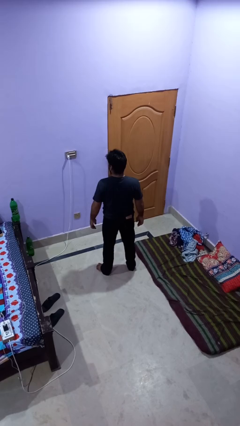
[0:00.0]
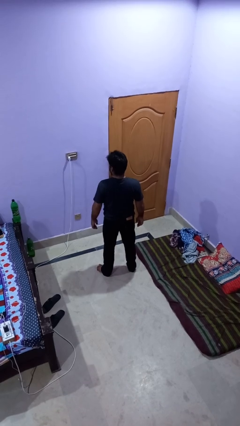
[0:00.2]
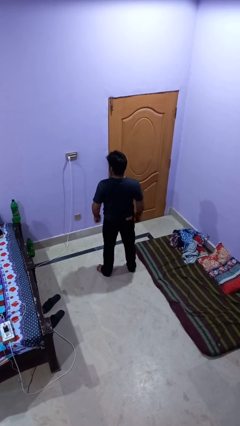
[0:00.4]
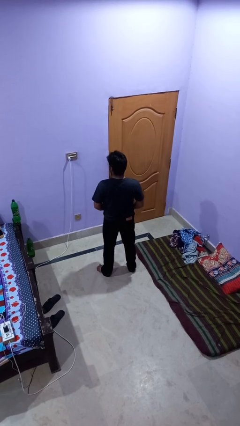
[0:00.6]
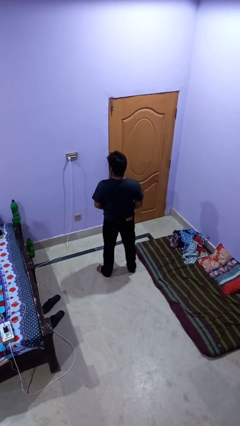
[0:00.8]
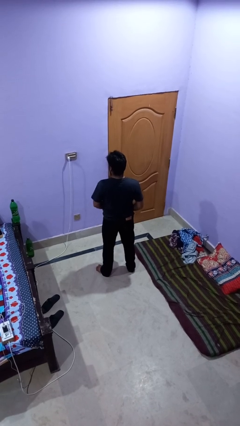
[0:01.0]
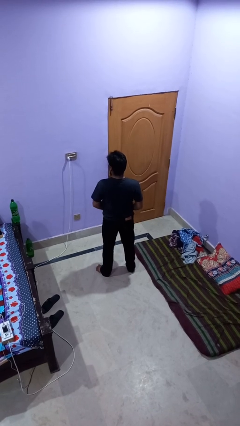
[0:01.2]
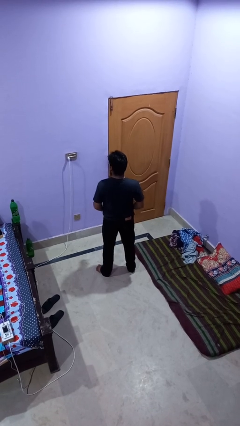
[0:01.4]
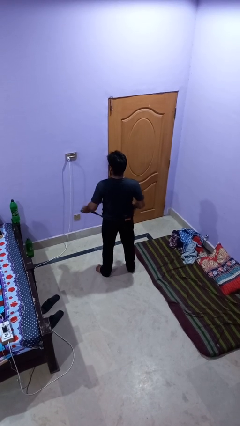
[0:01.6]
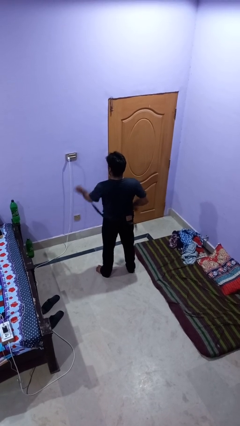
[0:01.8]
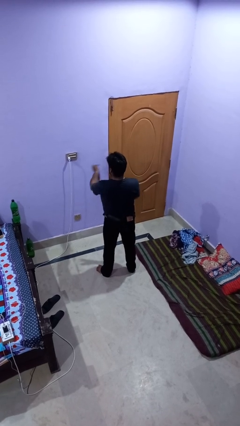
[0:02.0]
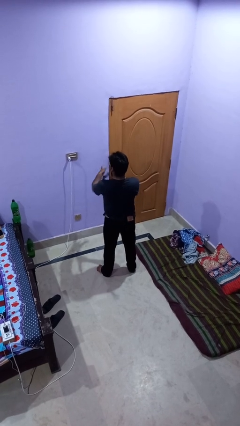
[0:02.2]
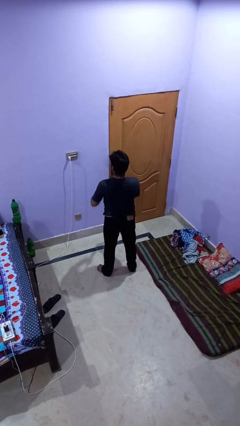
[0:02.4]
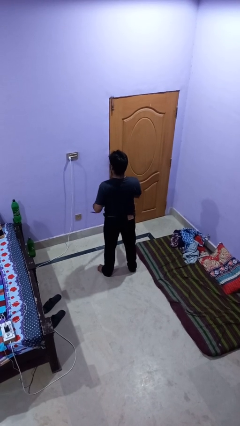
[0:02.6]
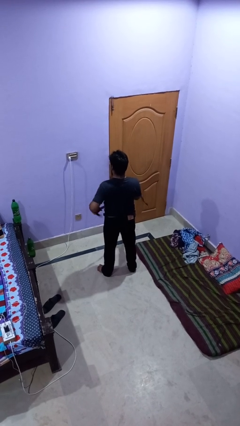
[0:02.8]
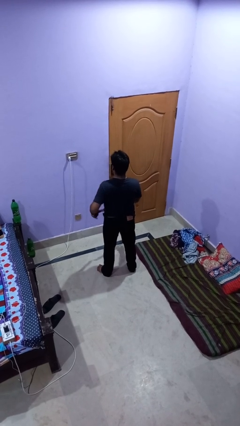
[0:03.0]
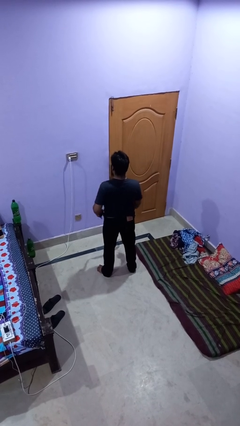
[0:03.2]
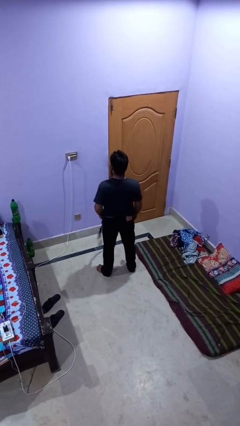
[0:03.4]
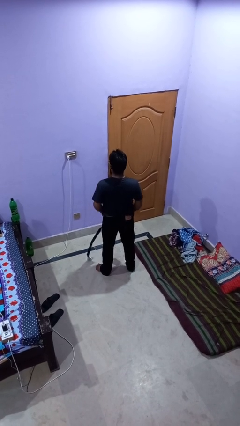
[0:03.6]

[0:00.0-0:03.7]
person takes off belt

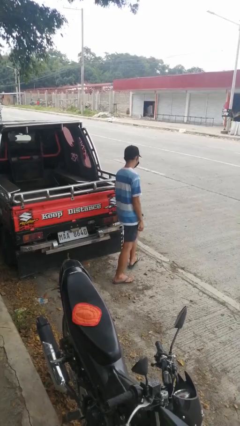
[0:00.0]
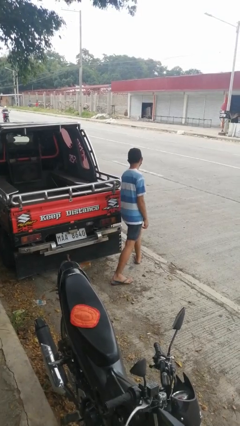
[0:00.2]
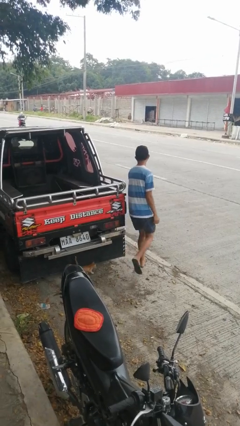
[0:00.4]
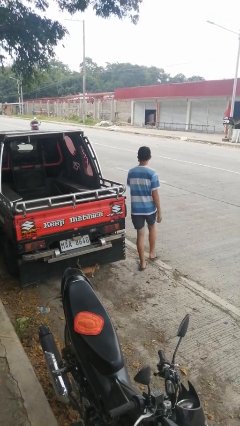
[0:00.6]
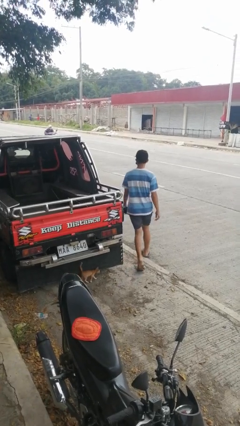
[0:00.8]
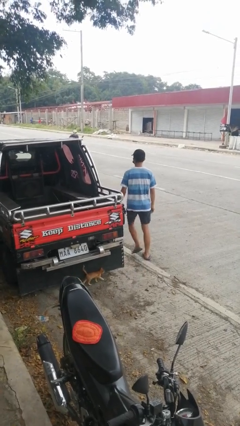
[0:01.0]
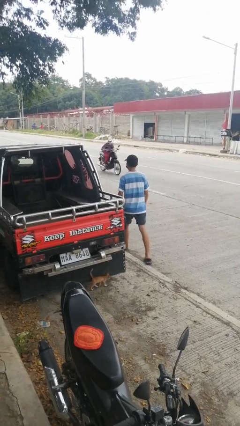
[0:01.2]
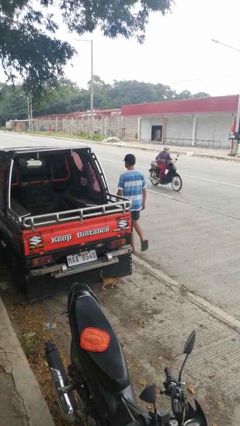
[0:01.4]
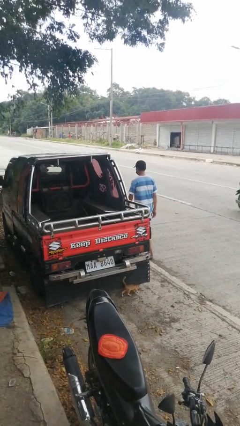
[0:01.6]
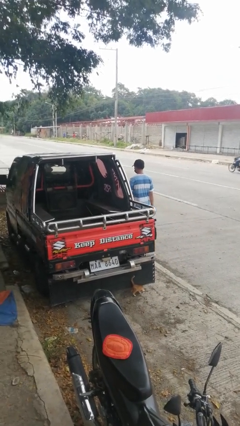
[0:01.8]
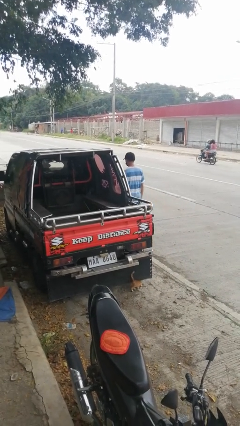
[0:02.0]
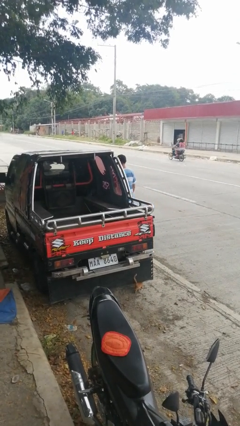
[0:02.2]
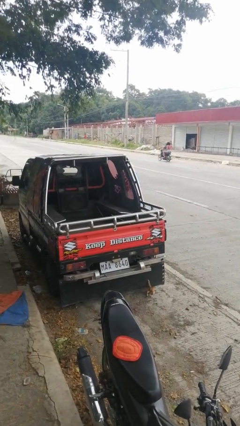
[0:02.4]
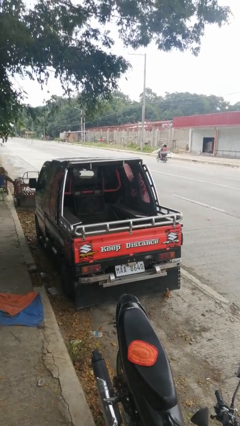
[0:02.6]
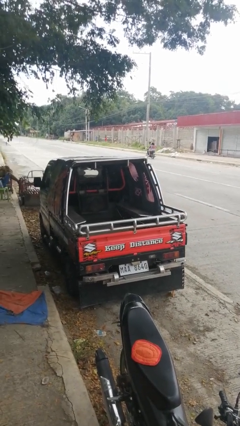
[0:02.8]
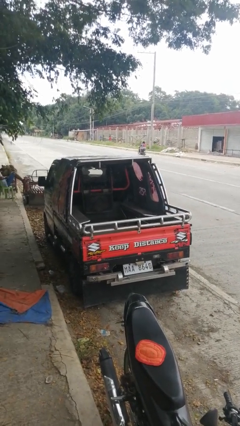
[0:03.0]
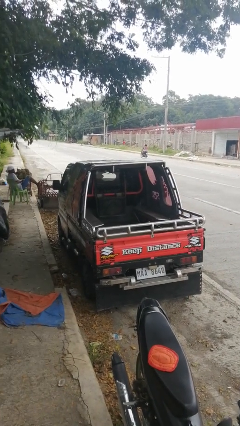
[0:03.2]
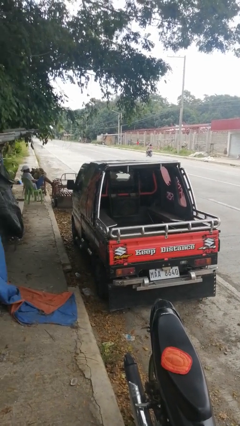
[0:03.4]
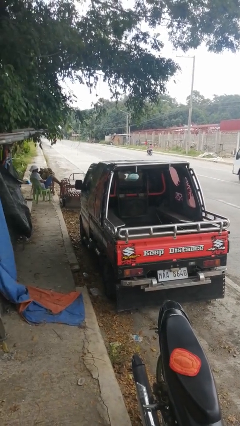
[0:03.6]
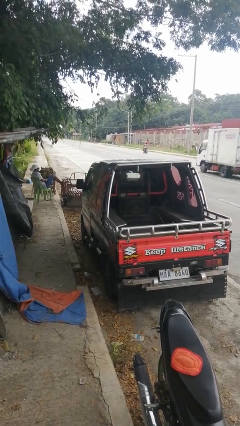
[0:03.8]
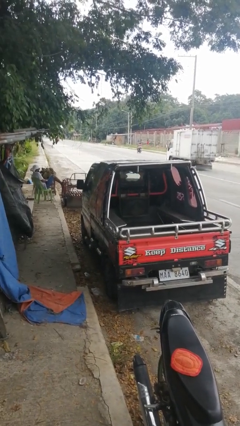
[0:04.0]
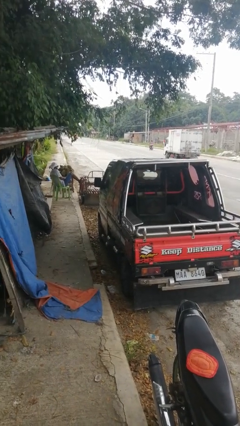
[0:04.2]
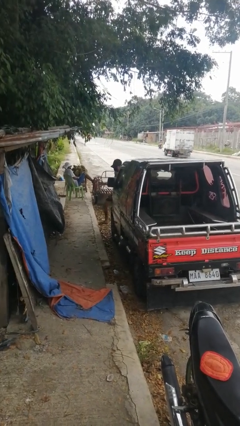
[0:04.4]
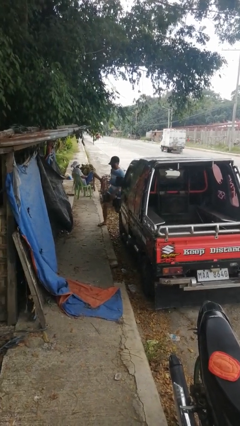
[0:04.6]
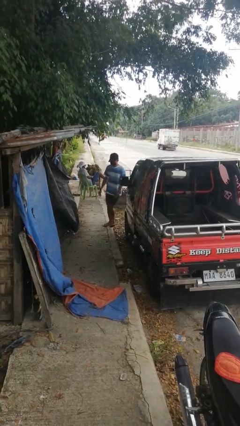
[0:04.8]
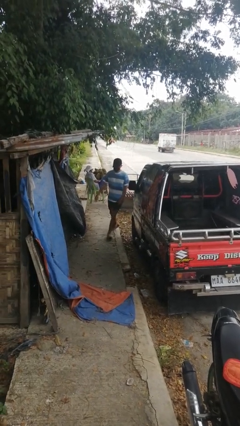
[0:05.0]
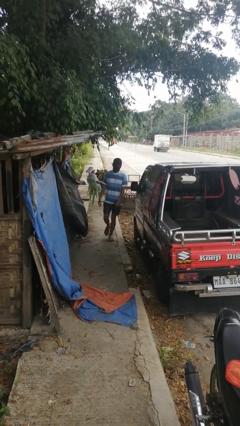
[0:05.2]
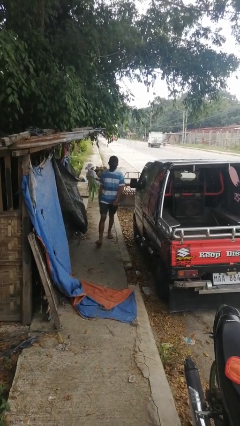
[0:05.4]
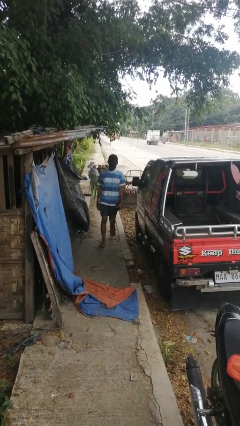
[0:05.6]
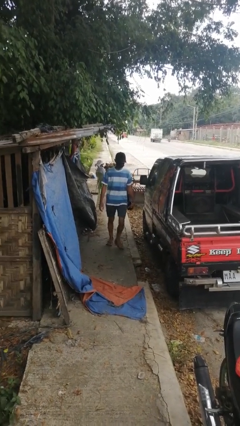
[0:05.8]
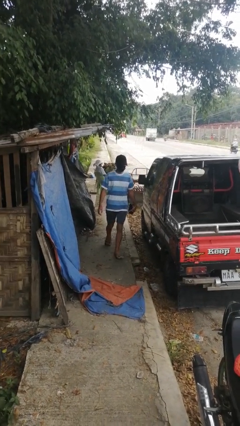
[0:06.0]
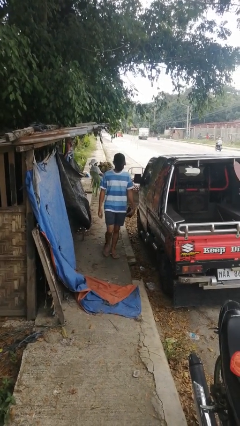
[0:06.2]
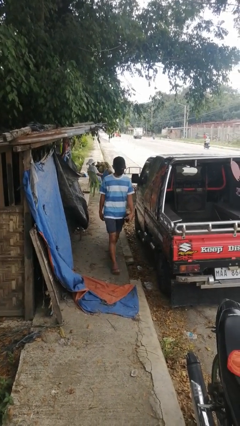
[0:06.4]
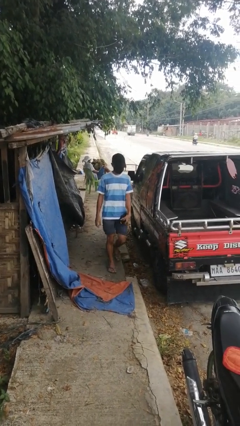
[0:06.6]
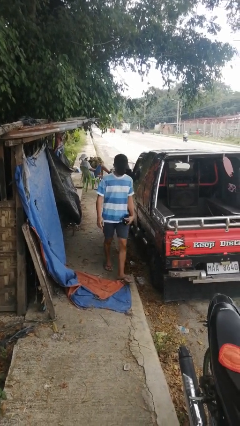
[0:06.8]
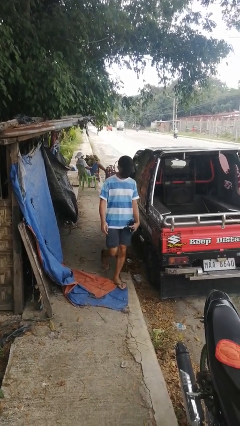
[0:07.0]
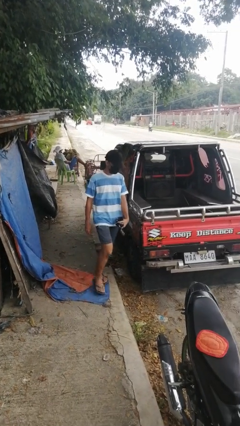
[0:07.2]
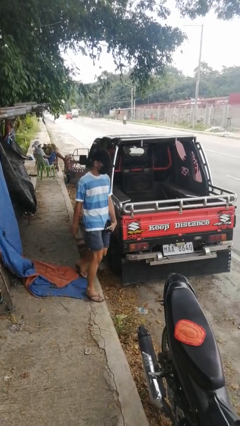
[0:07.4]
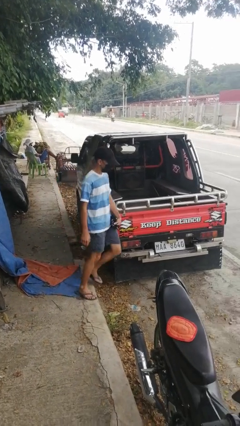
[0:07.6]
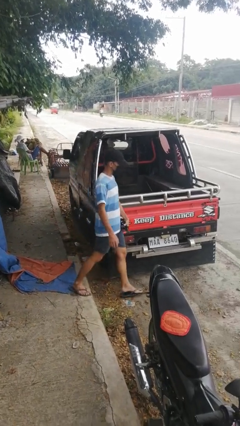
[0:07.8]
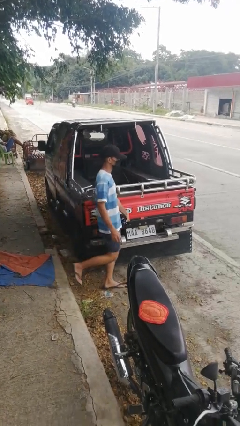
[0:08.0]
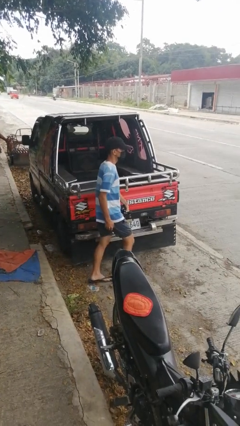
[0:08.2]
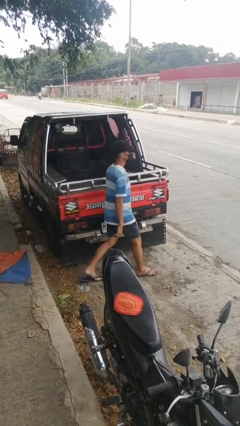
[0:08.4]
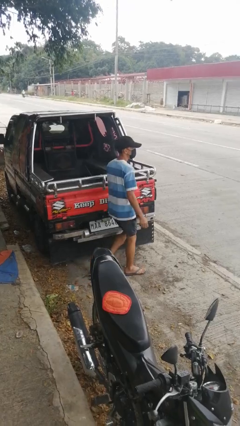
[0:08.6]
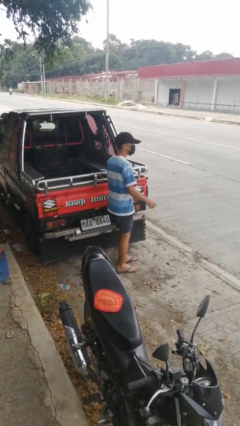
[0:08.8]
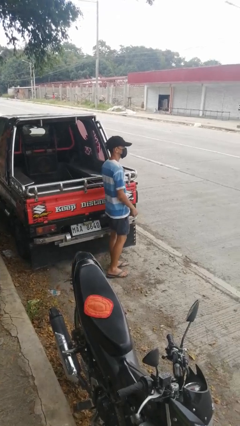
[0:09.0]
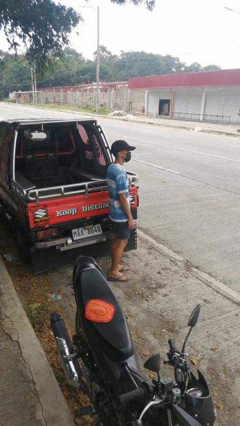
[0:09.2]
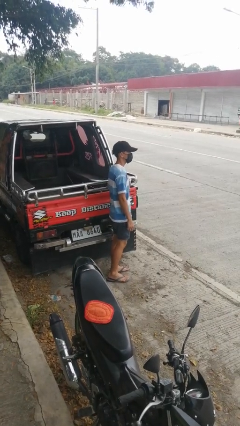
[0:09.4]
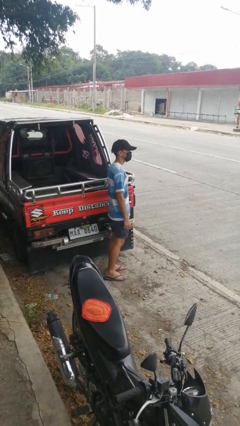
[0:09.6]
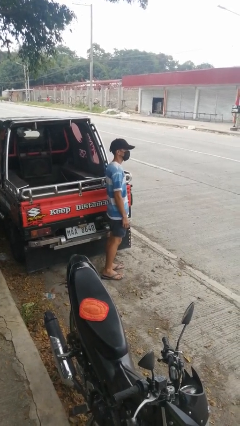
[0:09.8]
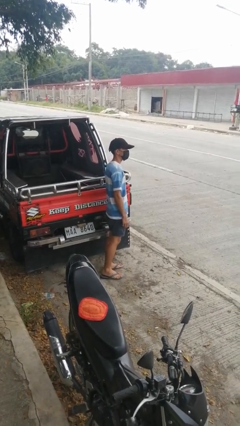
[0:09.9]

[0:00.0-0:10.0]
person walks around car

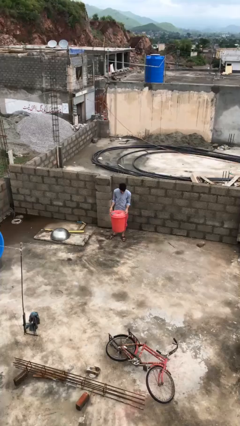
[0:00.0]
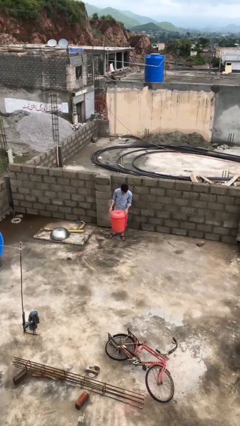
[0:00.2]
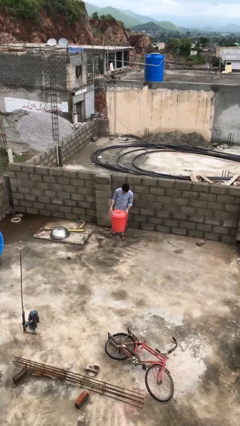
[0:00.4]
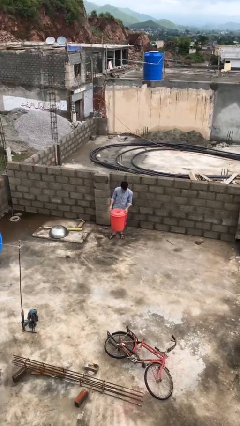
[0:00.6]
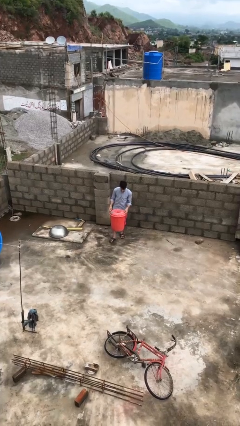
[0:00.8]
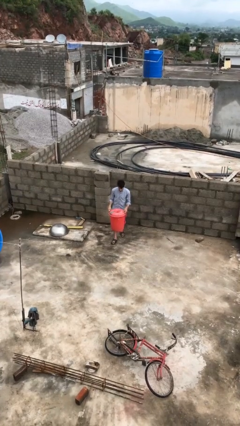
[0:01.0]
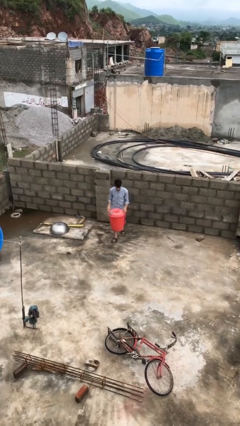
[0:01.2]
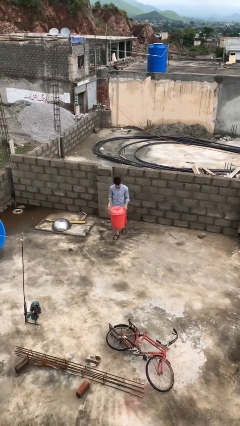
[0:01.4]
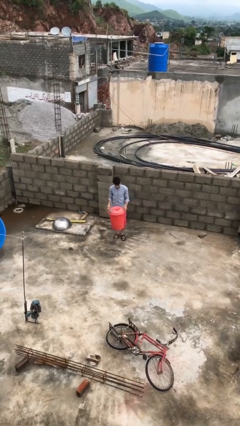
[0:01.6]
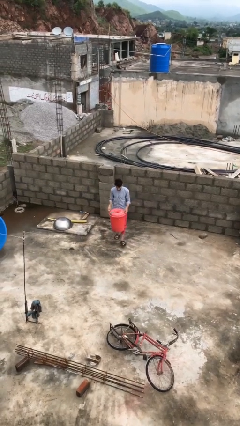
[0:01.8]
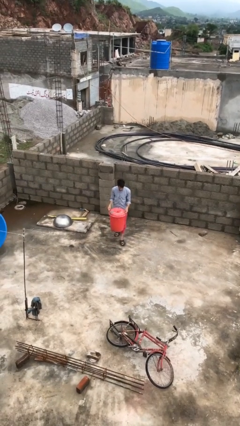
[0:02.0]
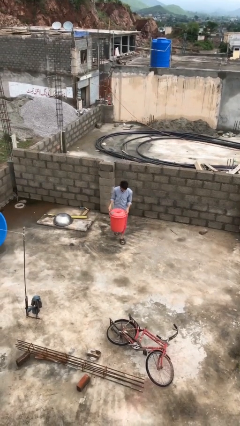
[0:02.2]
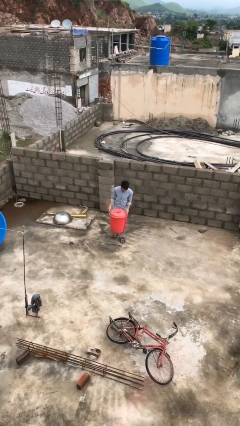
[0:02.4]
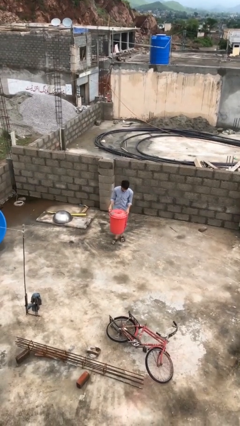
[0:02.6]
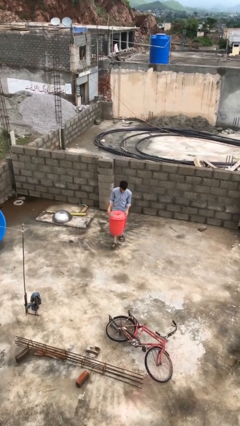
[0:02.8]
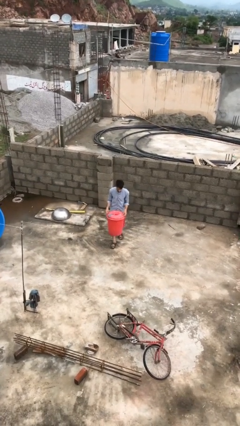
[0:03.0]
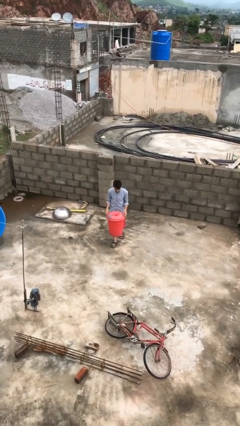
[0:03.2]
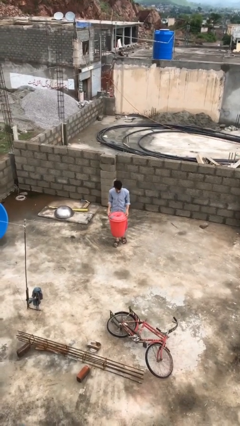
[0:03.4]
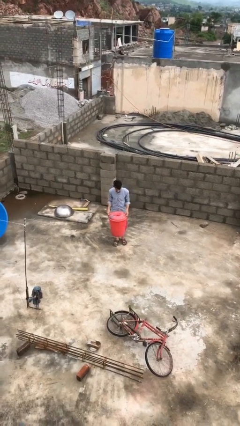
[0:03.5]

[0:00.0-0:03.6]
person carries heavy object

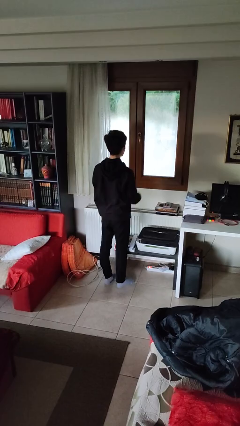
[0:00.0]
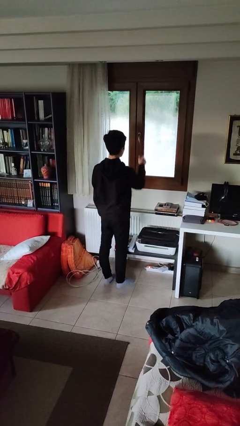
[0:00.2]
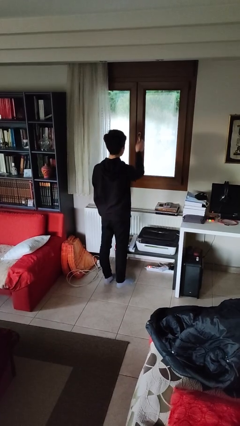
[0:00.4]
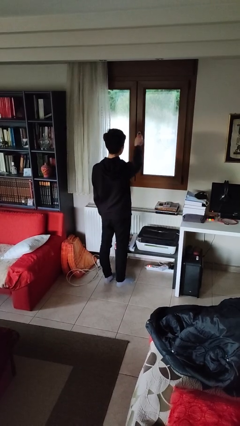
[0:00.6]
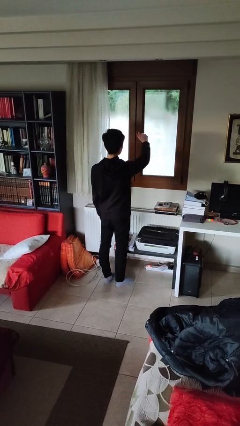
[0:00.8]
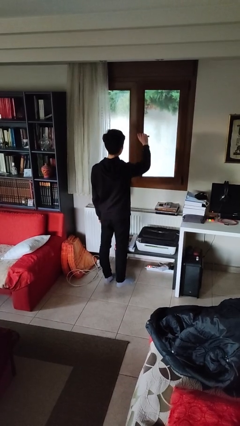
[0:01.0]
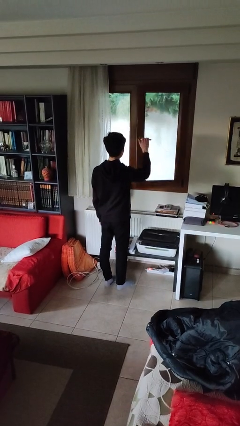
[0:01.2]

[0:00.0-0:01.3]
person opens home window
